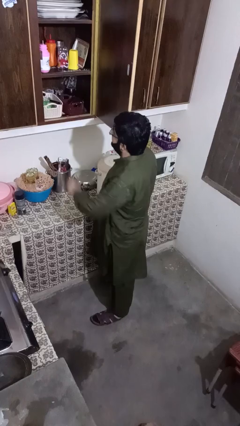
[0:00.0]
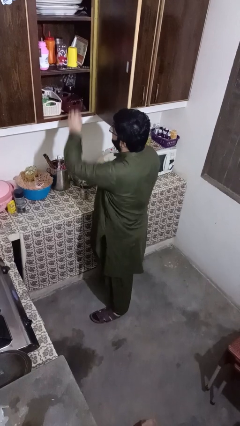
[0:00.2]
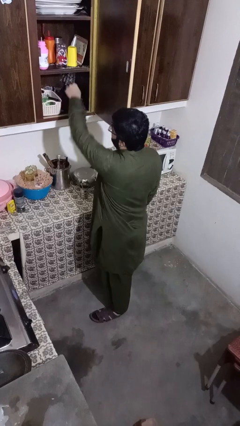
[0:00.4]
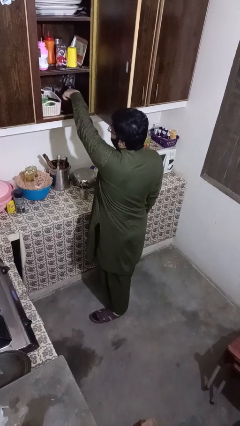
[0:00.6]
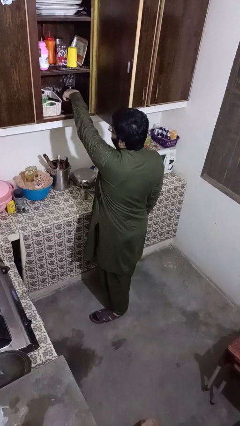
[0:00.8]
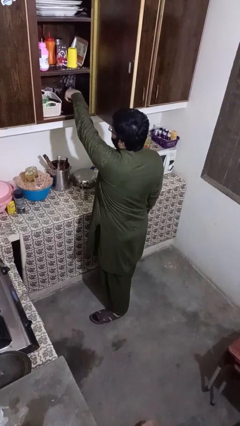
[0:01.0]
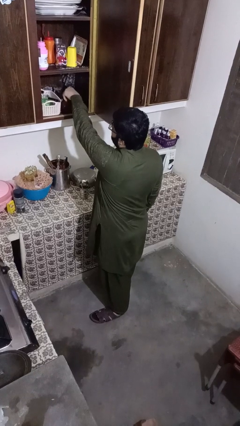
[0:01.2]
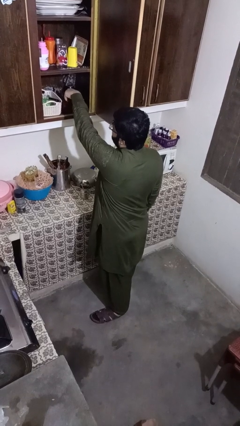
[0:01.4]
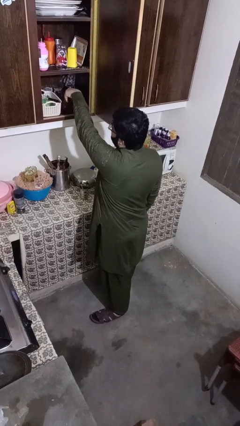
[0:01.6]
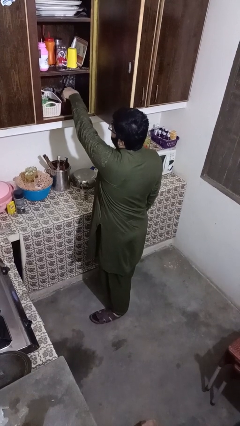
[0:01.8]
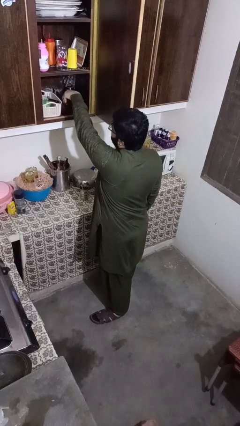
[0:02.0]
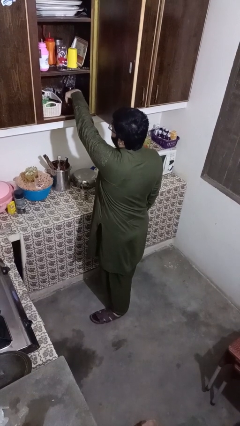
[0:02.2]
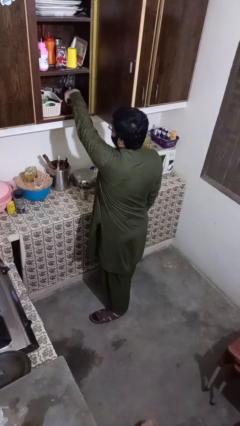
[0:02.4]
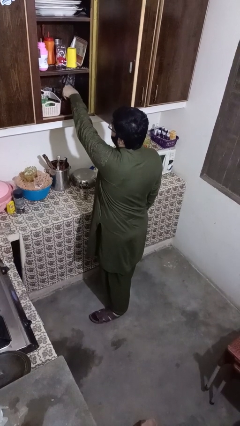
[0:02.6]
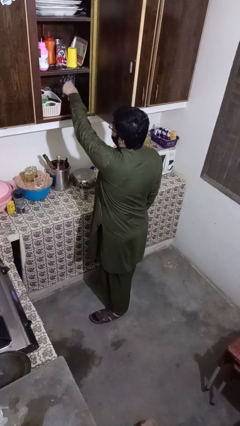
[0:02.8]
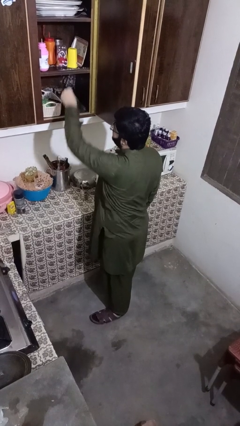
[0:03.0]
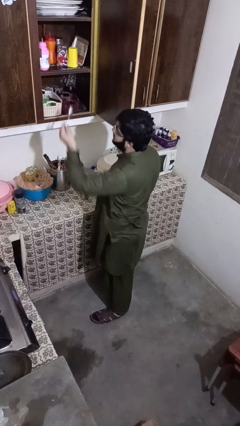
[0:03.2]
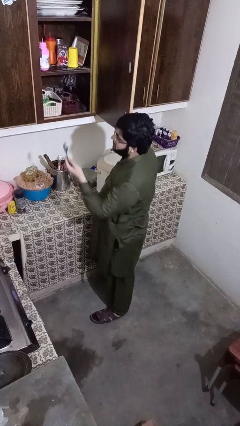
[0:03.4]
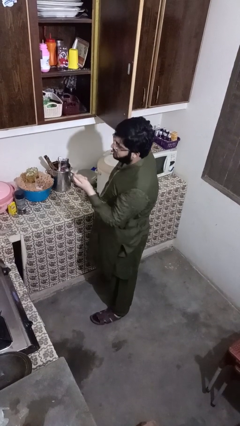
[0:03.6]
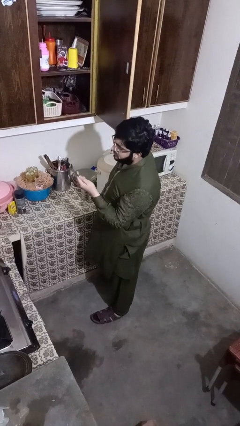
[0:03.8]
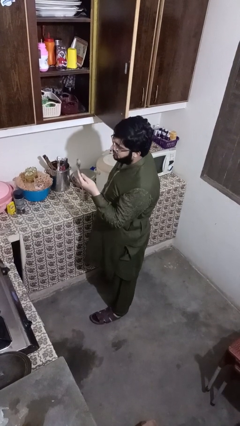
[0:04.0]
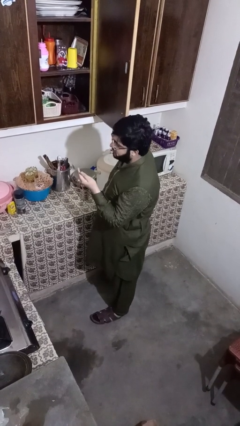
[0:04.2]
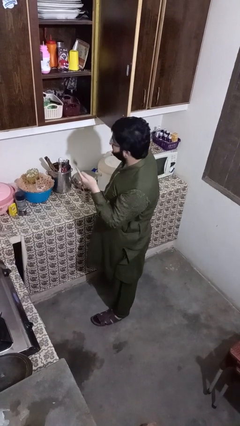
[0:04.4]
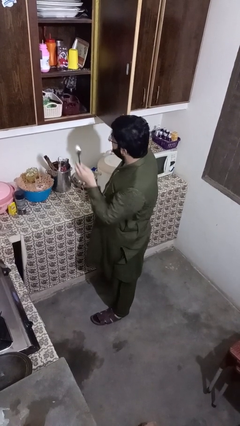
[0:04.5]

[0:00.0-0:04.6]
person takes object from kitchen drawer

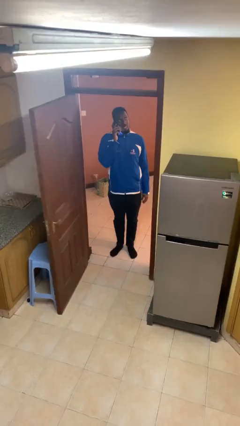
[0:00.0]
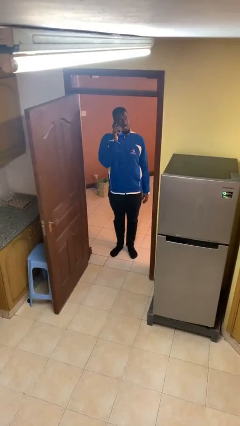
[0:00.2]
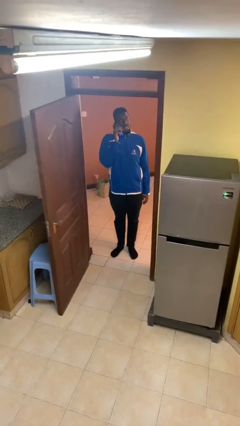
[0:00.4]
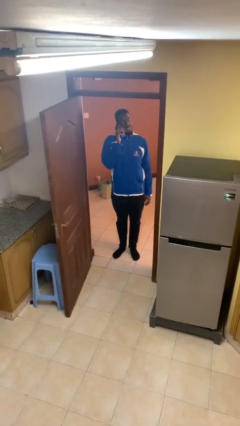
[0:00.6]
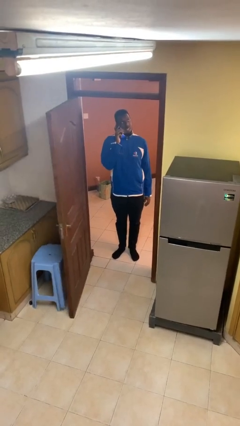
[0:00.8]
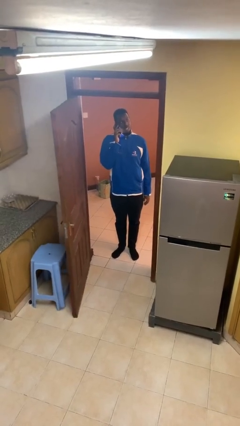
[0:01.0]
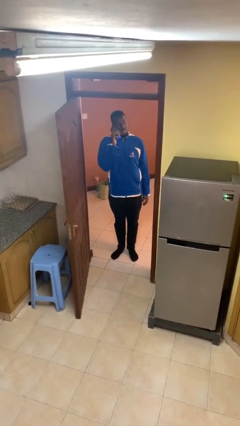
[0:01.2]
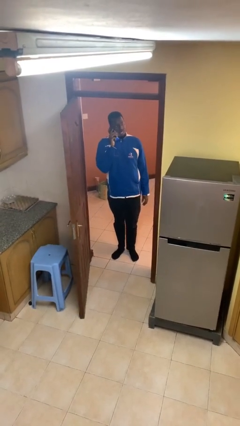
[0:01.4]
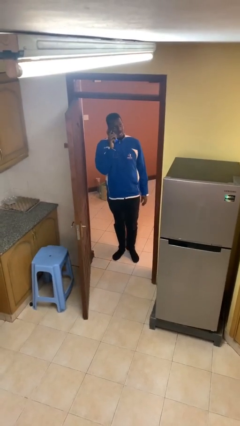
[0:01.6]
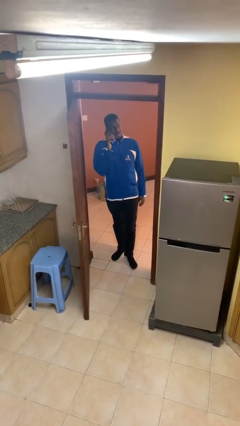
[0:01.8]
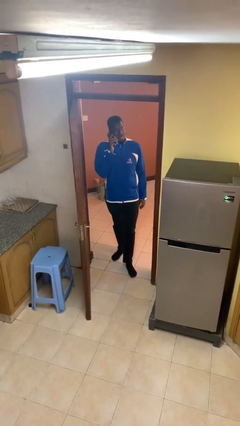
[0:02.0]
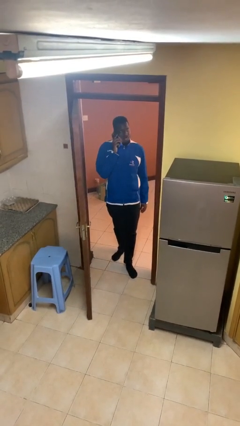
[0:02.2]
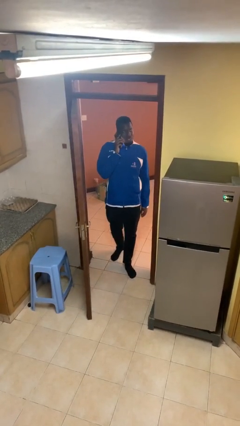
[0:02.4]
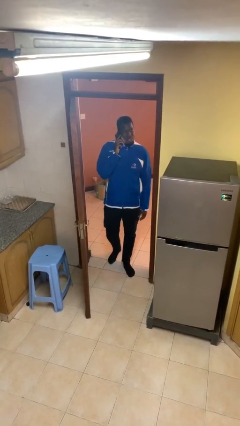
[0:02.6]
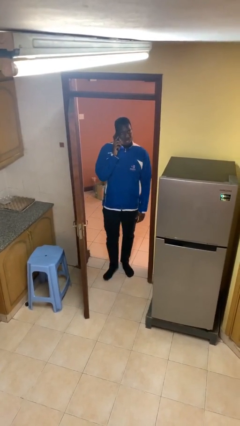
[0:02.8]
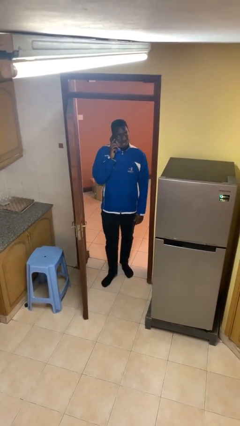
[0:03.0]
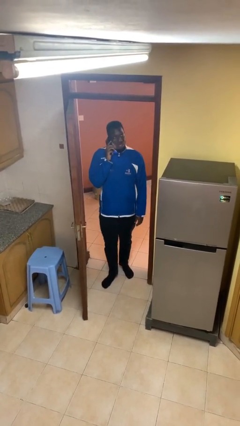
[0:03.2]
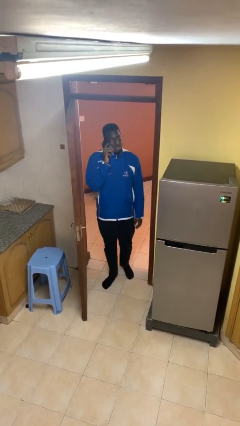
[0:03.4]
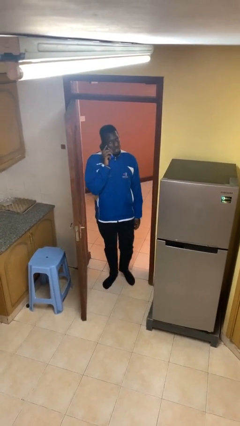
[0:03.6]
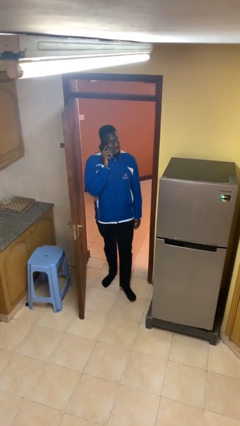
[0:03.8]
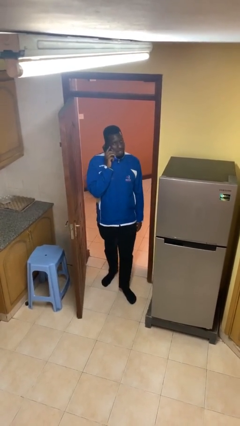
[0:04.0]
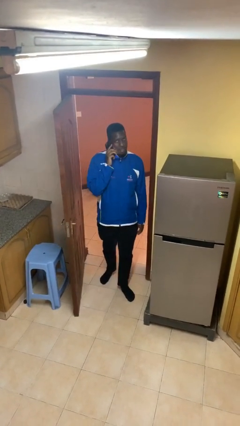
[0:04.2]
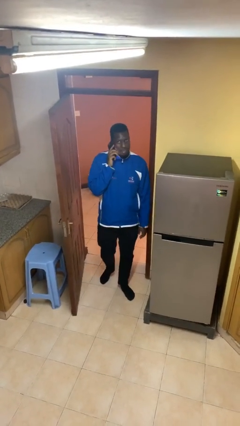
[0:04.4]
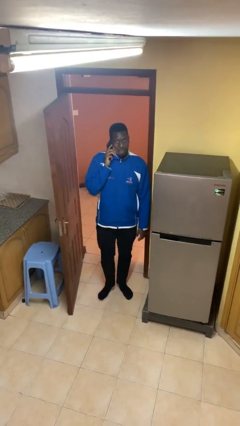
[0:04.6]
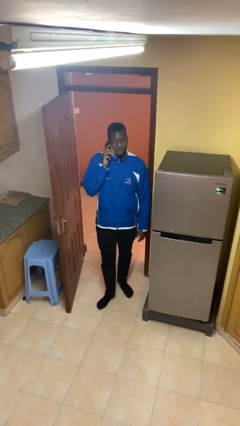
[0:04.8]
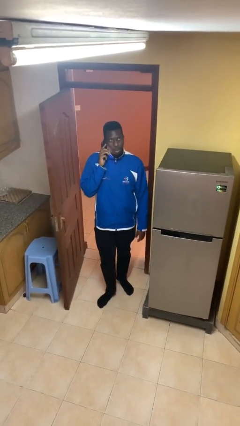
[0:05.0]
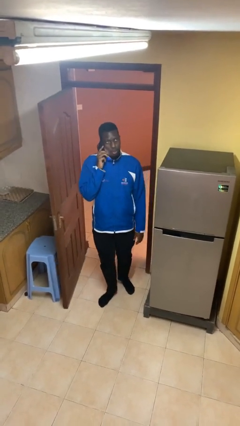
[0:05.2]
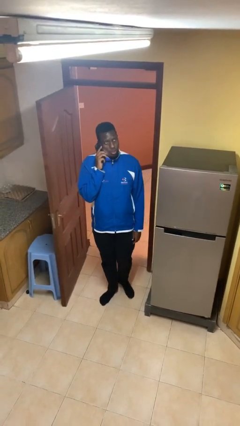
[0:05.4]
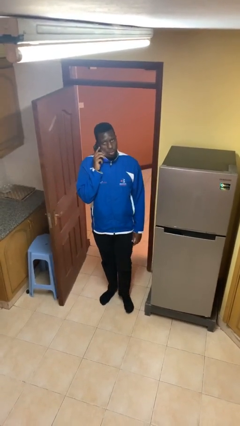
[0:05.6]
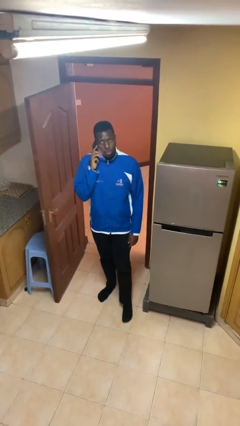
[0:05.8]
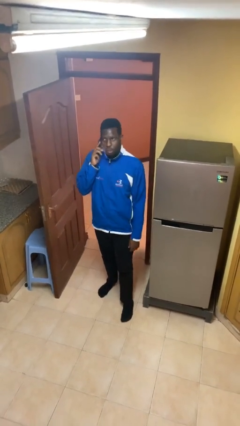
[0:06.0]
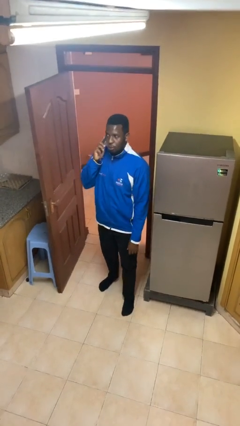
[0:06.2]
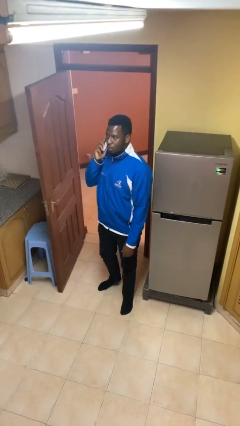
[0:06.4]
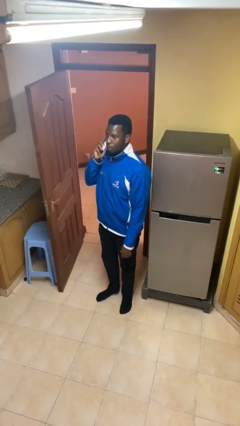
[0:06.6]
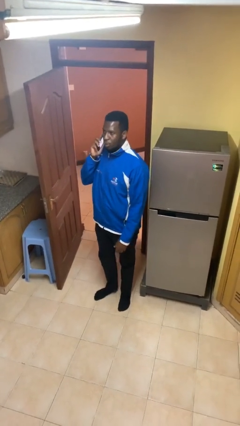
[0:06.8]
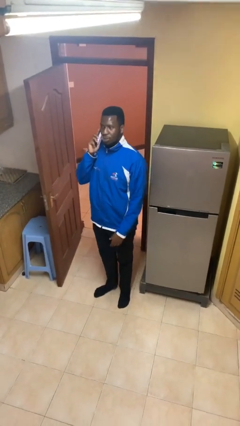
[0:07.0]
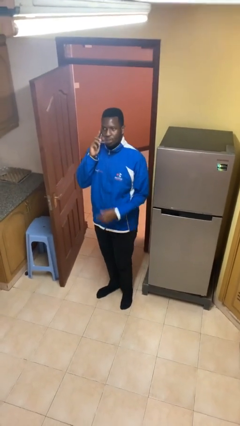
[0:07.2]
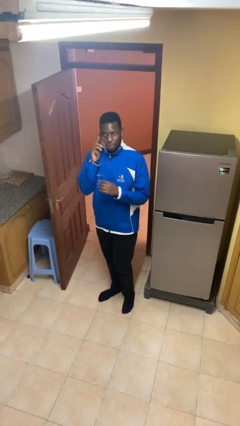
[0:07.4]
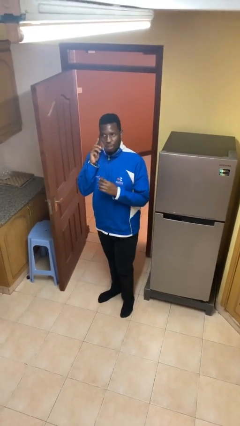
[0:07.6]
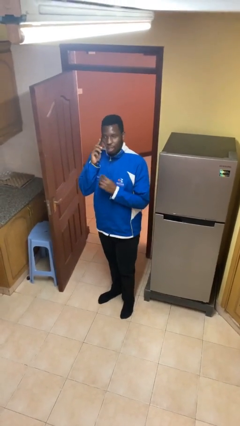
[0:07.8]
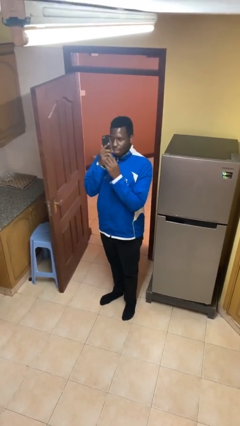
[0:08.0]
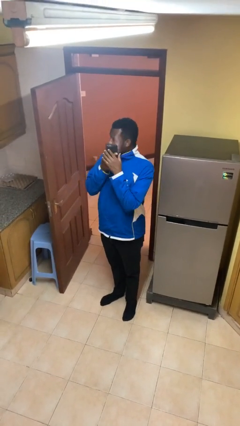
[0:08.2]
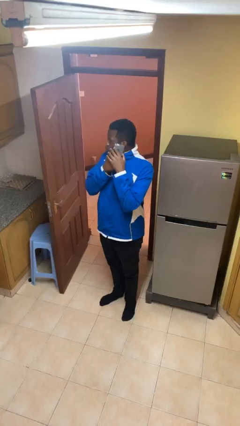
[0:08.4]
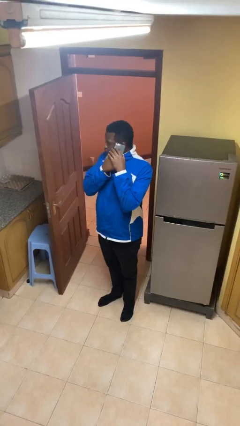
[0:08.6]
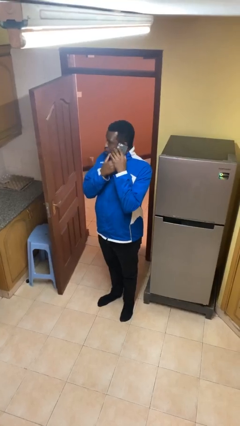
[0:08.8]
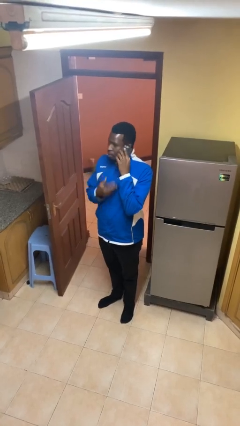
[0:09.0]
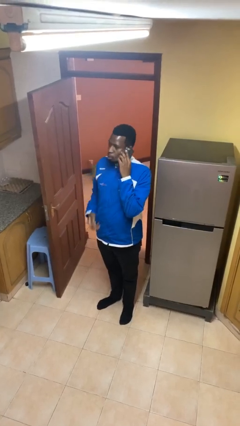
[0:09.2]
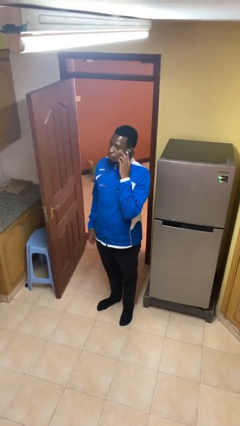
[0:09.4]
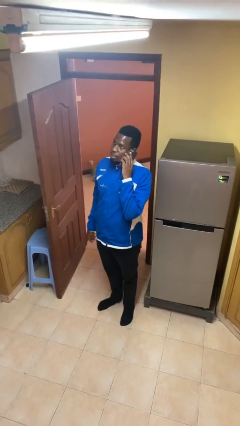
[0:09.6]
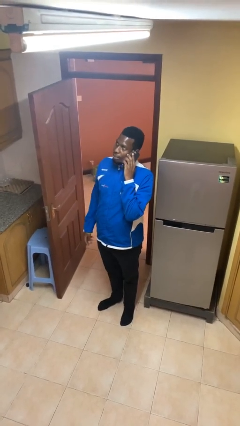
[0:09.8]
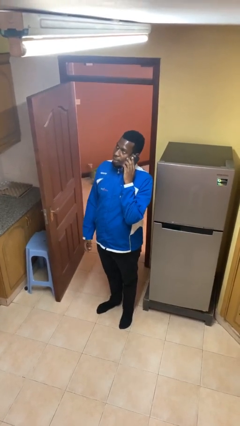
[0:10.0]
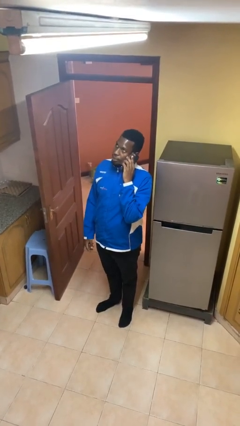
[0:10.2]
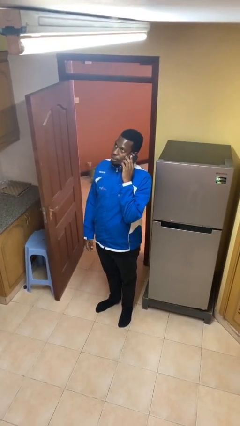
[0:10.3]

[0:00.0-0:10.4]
person enters scene through structure

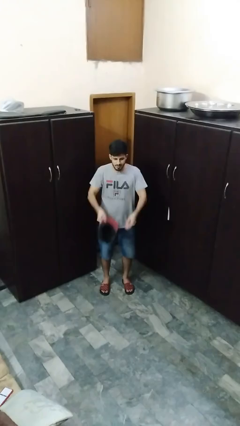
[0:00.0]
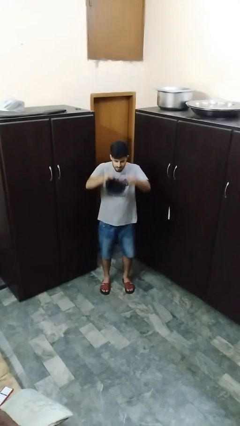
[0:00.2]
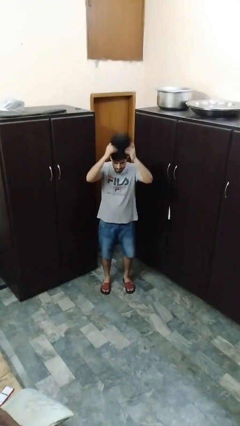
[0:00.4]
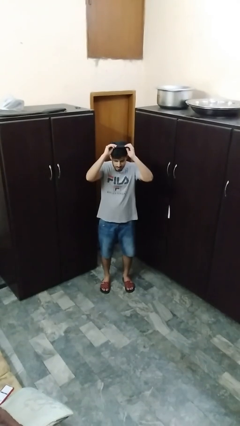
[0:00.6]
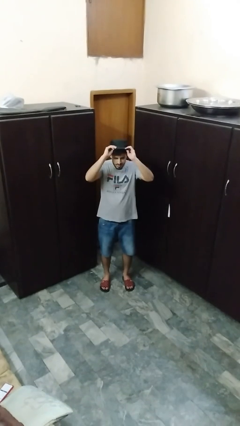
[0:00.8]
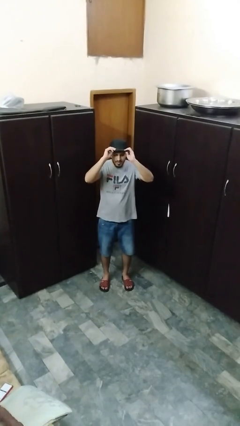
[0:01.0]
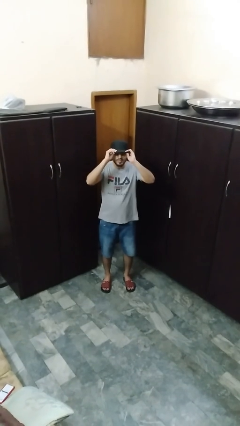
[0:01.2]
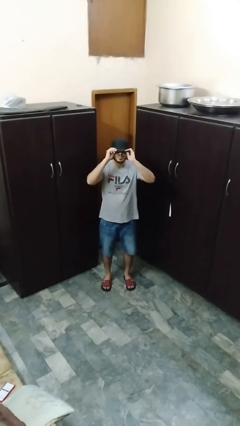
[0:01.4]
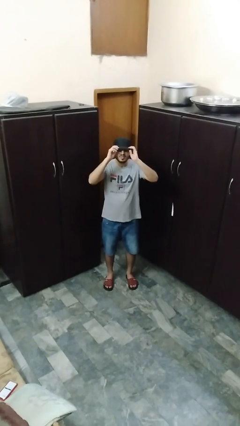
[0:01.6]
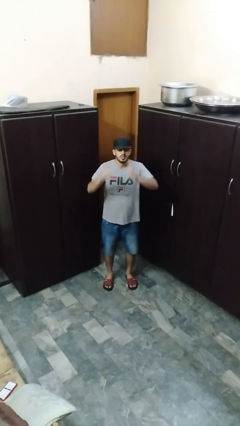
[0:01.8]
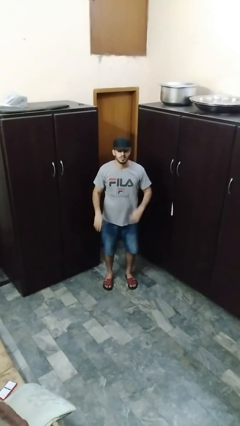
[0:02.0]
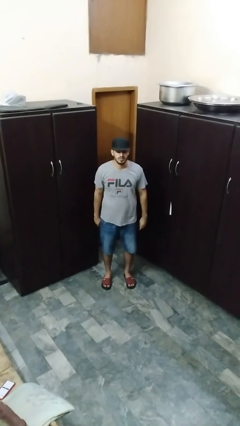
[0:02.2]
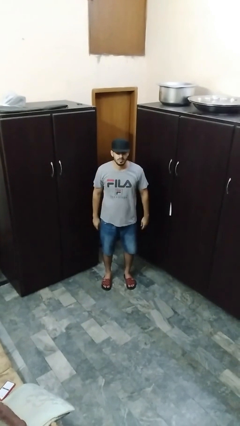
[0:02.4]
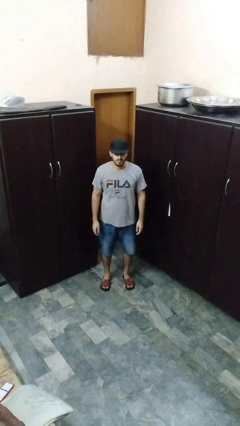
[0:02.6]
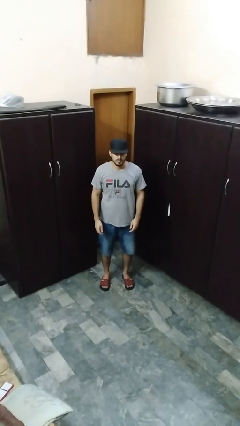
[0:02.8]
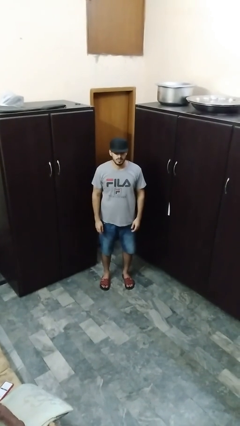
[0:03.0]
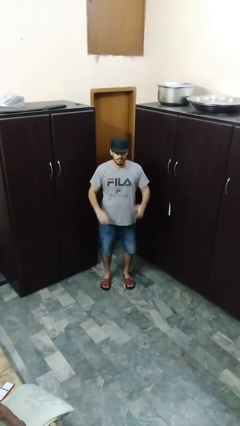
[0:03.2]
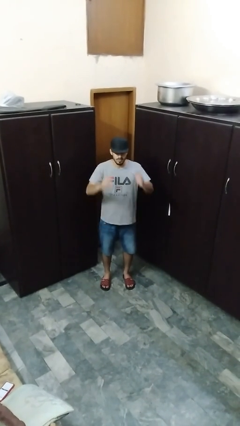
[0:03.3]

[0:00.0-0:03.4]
person puts on hat
